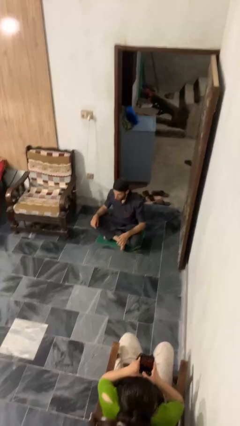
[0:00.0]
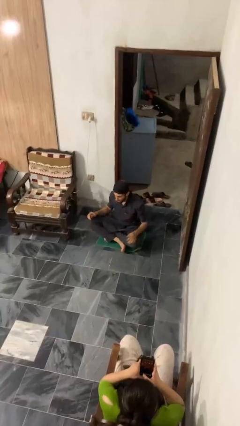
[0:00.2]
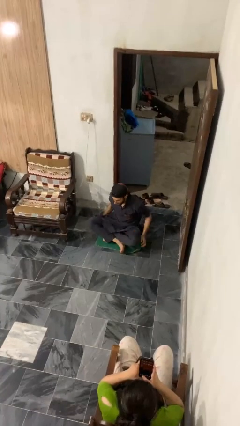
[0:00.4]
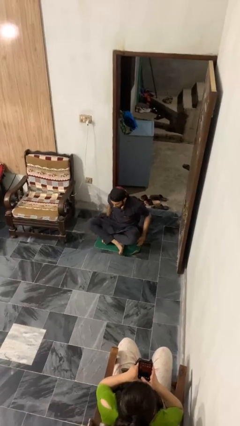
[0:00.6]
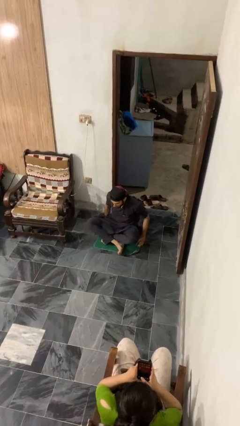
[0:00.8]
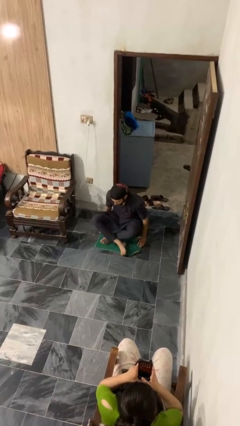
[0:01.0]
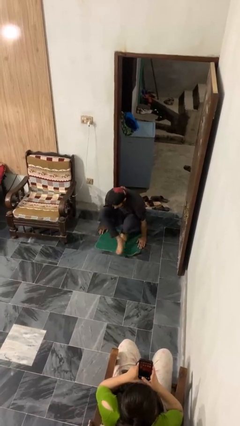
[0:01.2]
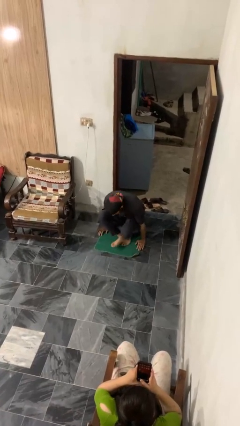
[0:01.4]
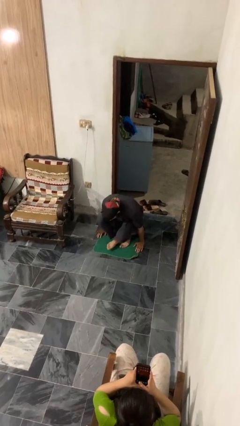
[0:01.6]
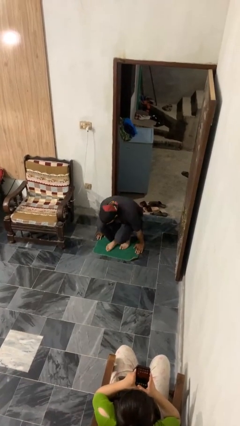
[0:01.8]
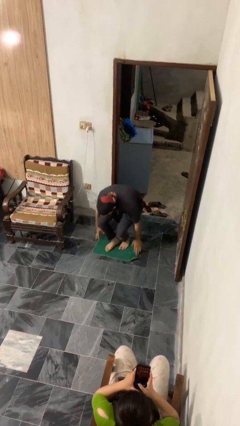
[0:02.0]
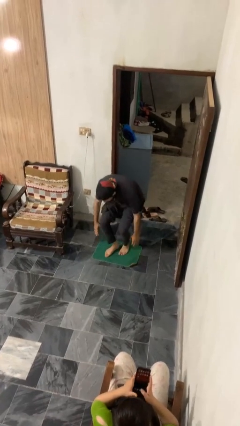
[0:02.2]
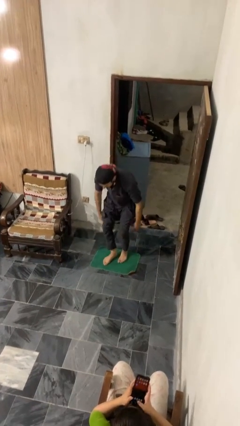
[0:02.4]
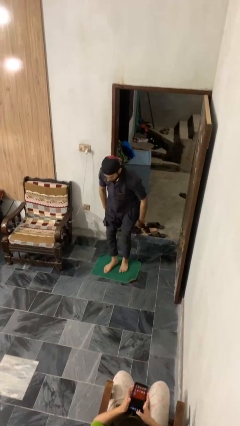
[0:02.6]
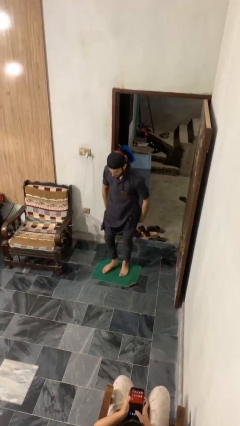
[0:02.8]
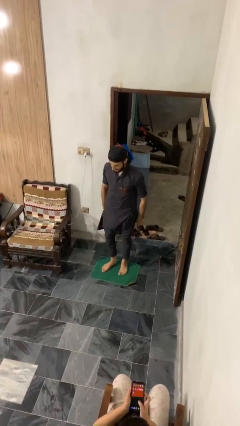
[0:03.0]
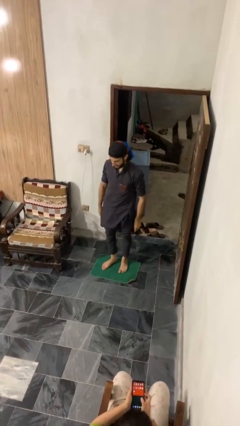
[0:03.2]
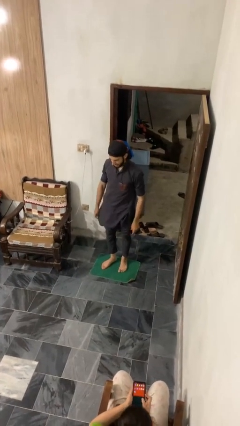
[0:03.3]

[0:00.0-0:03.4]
person stands up from floor

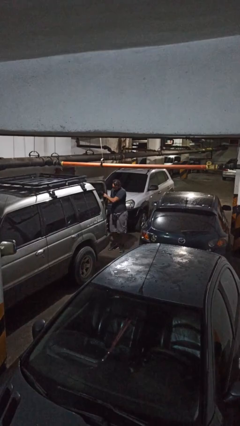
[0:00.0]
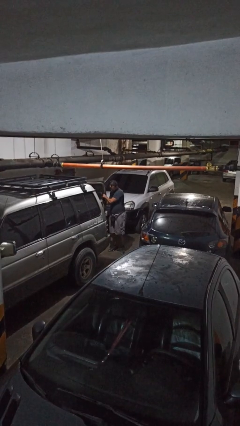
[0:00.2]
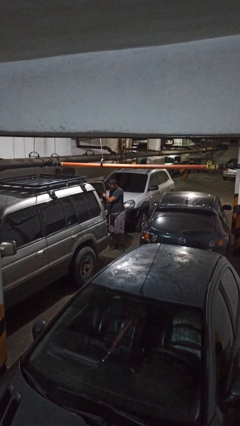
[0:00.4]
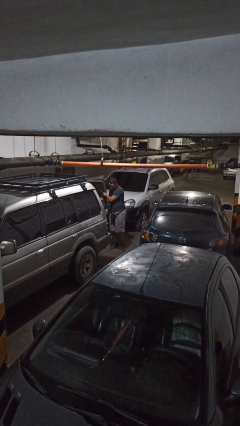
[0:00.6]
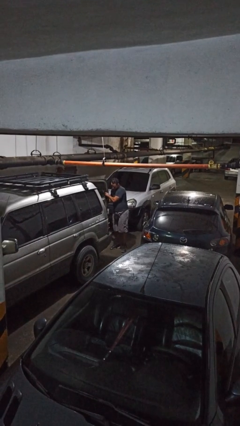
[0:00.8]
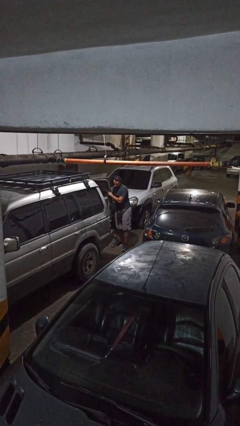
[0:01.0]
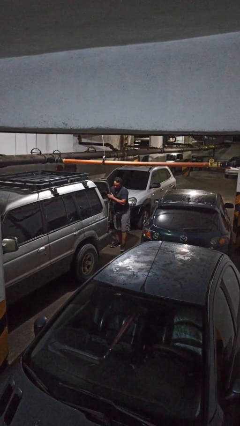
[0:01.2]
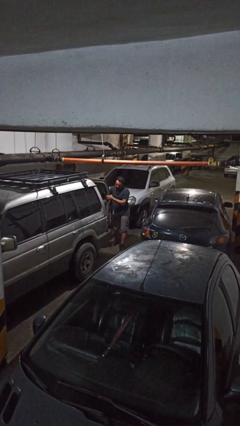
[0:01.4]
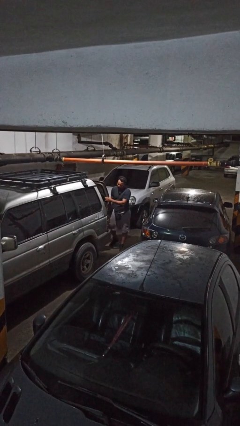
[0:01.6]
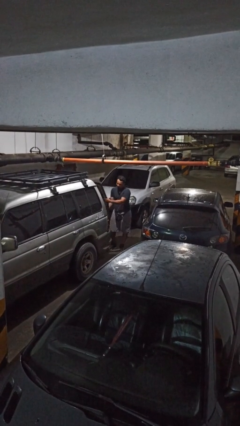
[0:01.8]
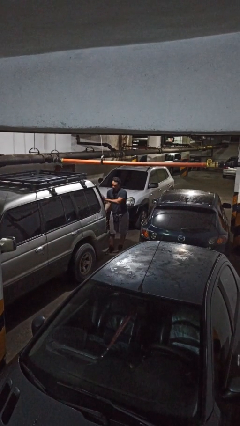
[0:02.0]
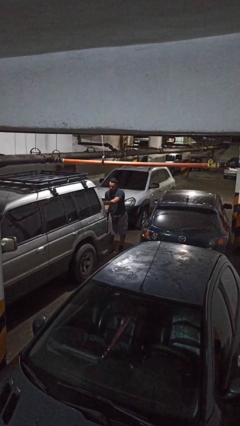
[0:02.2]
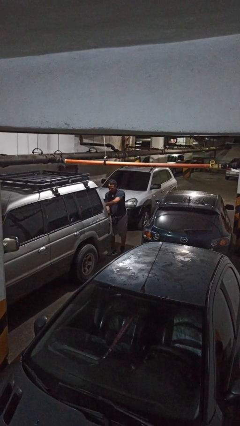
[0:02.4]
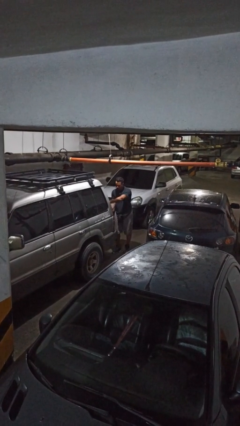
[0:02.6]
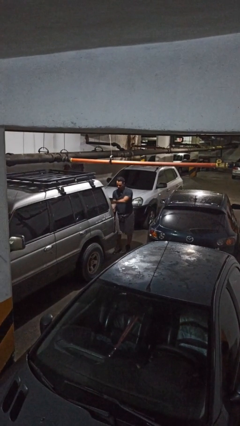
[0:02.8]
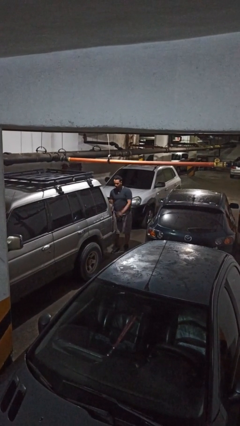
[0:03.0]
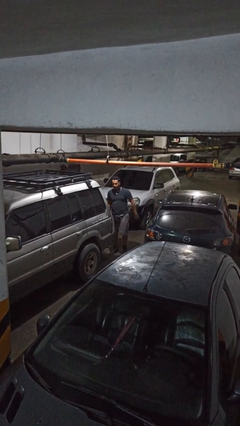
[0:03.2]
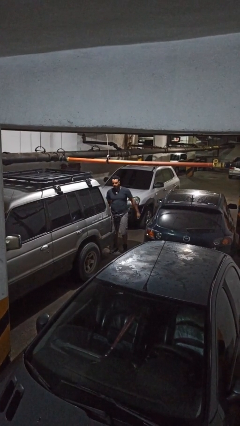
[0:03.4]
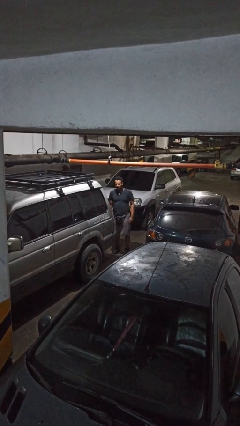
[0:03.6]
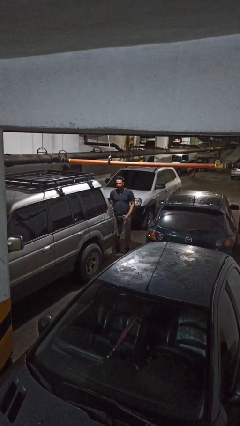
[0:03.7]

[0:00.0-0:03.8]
person closes car trunk

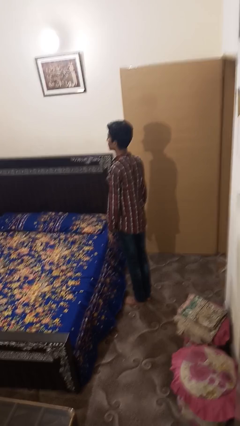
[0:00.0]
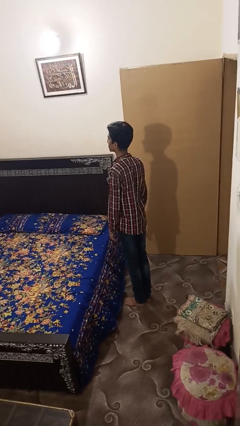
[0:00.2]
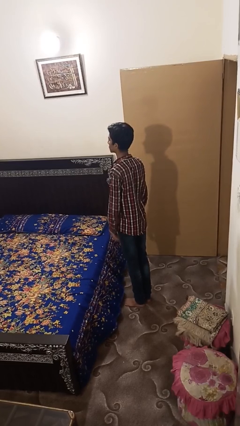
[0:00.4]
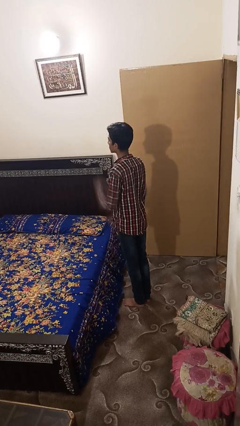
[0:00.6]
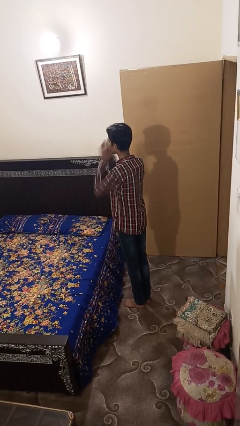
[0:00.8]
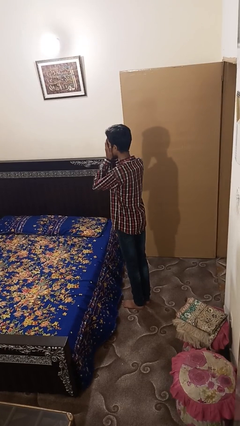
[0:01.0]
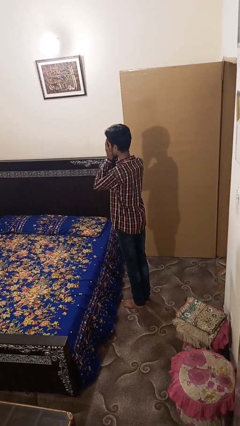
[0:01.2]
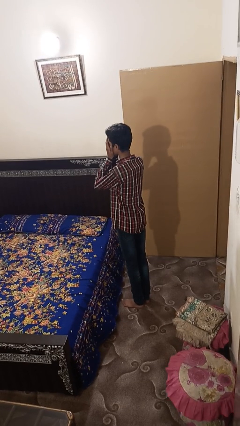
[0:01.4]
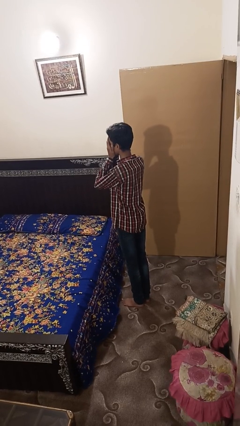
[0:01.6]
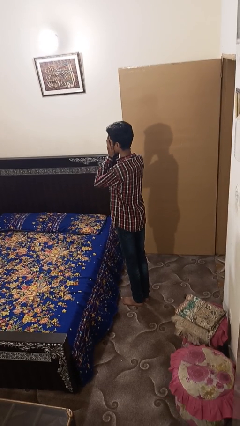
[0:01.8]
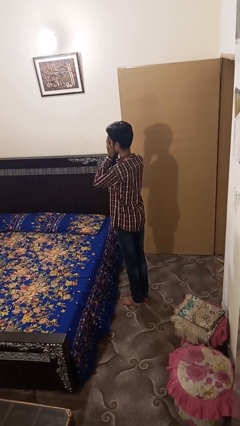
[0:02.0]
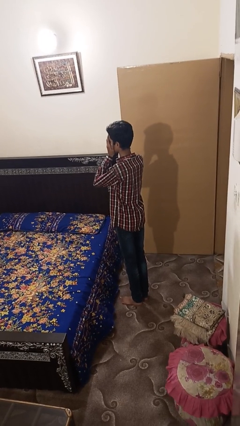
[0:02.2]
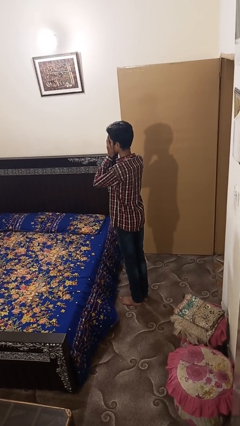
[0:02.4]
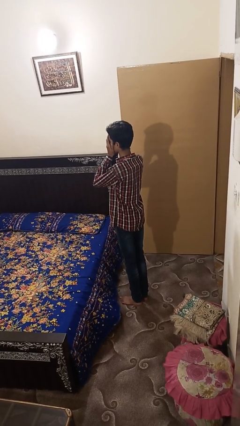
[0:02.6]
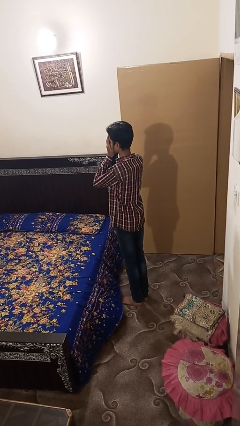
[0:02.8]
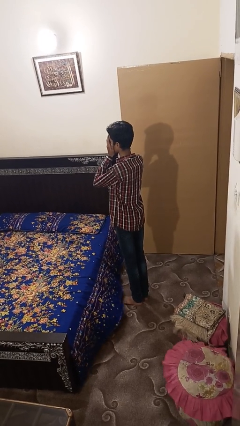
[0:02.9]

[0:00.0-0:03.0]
person covers face with hands

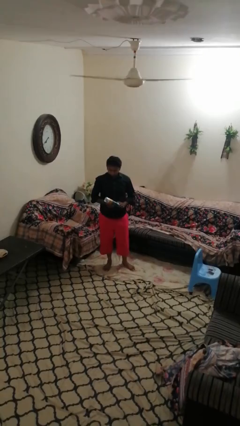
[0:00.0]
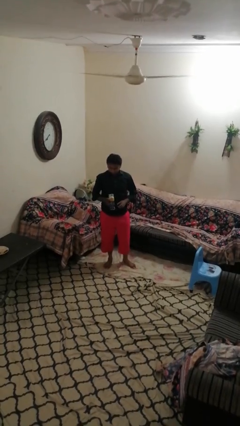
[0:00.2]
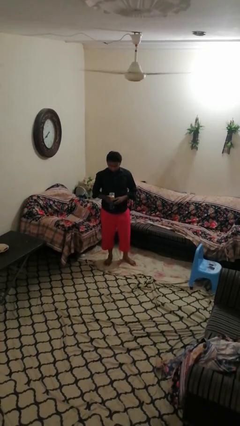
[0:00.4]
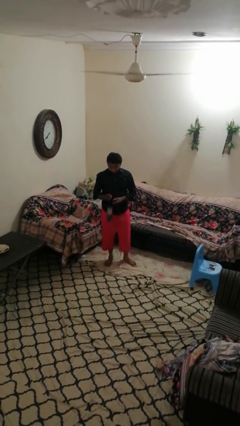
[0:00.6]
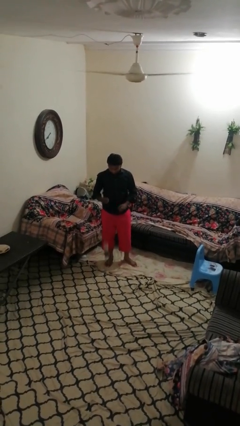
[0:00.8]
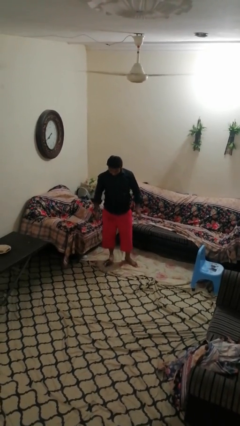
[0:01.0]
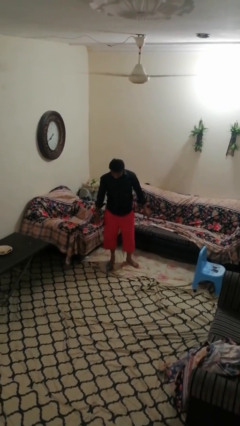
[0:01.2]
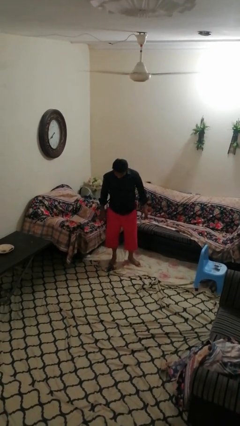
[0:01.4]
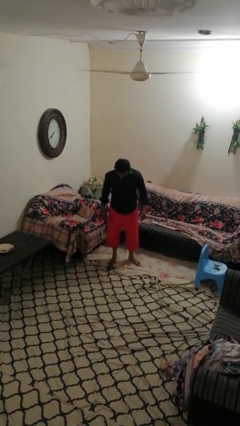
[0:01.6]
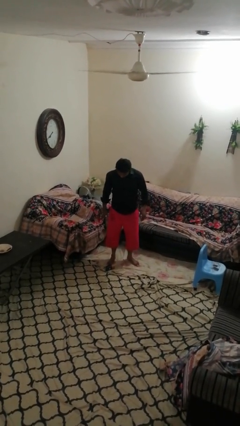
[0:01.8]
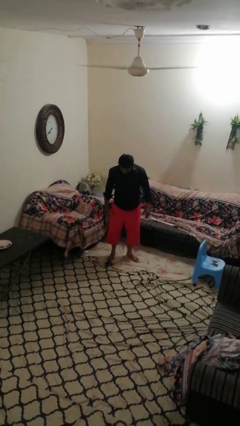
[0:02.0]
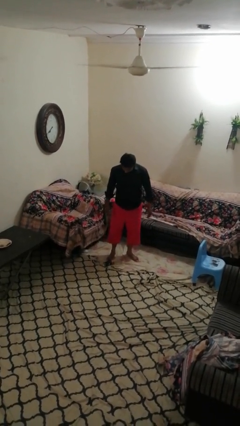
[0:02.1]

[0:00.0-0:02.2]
person drops object

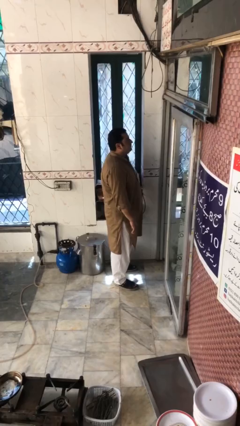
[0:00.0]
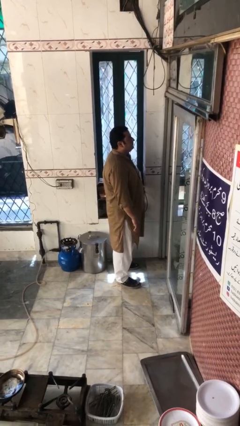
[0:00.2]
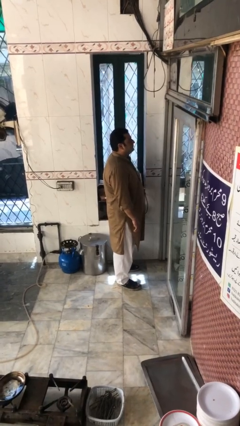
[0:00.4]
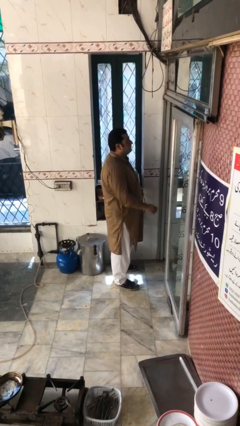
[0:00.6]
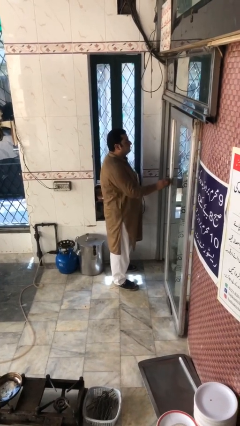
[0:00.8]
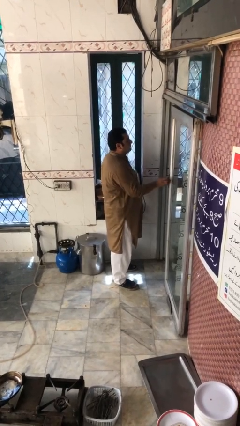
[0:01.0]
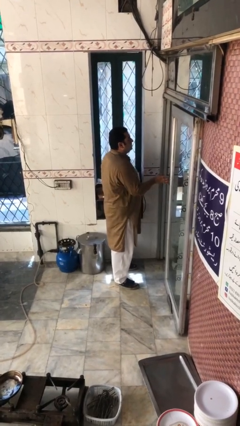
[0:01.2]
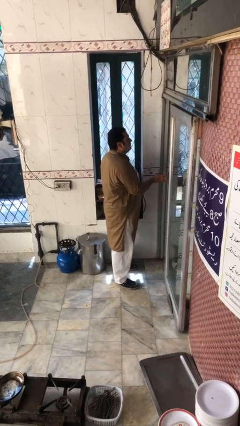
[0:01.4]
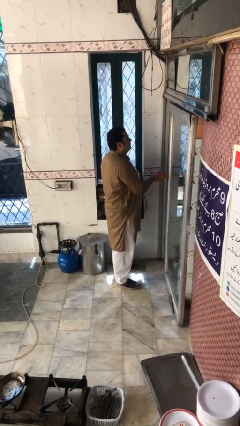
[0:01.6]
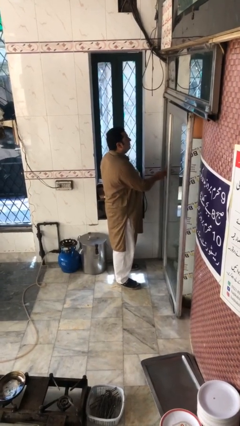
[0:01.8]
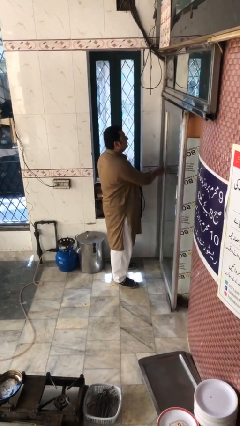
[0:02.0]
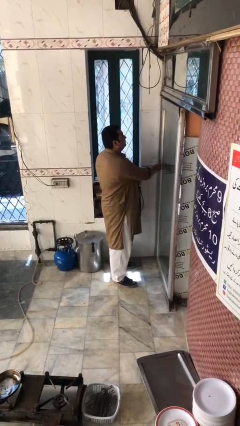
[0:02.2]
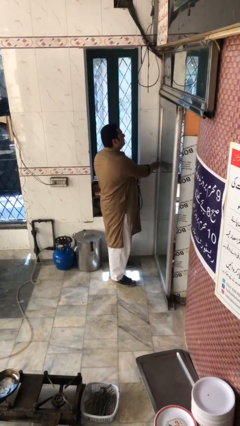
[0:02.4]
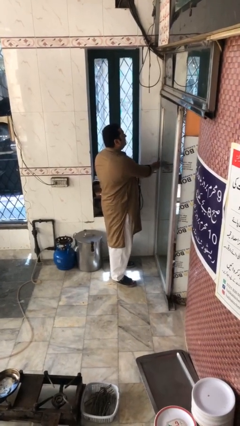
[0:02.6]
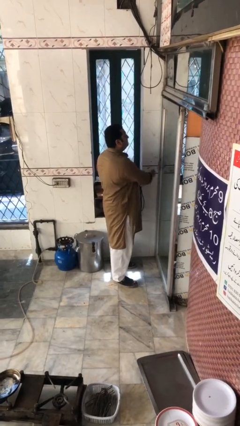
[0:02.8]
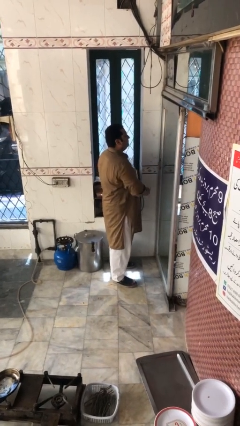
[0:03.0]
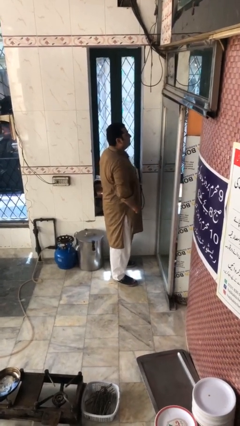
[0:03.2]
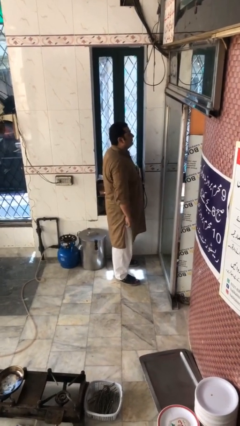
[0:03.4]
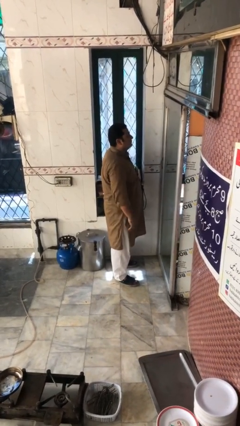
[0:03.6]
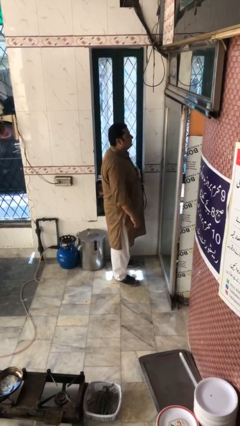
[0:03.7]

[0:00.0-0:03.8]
person closes sliding door

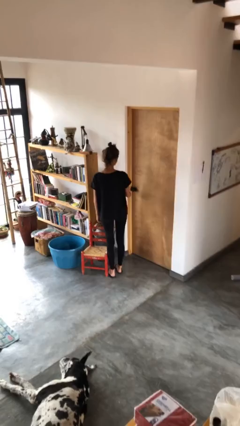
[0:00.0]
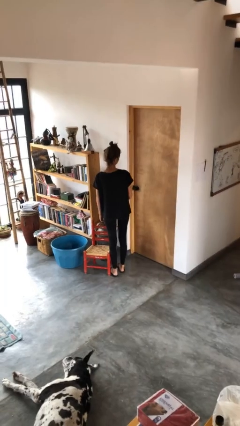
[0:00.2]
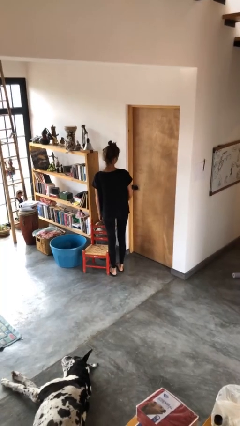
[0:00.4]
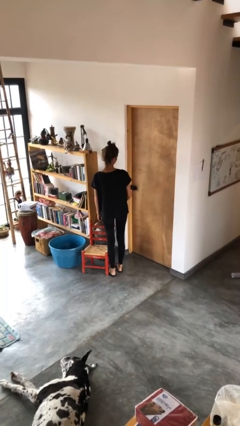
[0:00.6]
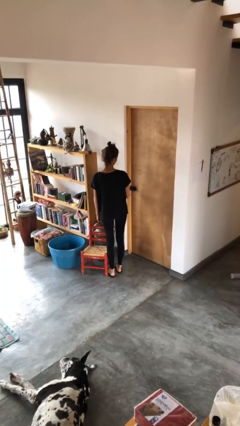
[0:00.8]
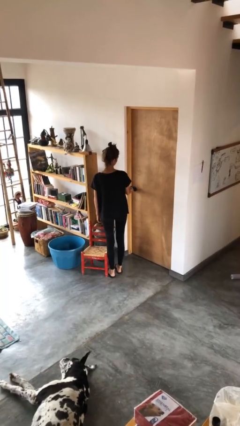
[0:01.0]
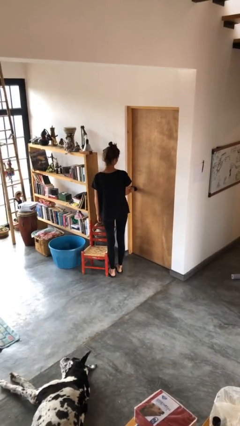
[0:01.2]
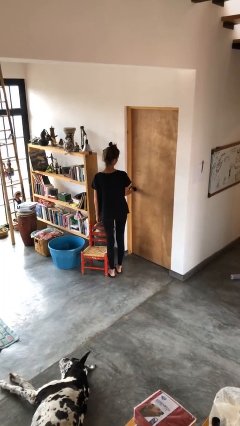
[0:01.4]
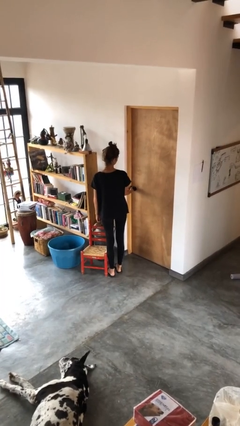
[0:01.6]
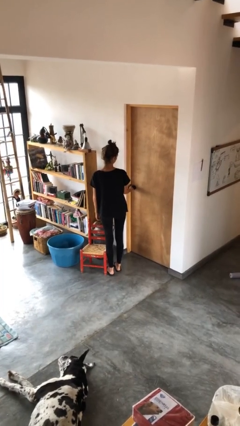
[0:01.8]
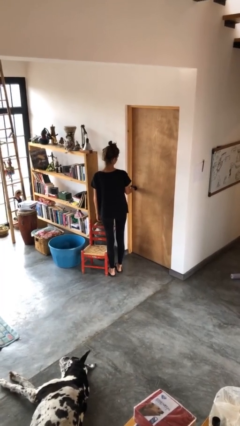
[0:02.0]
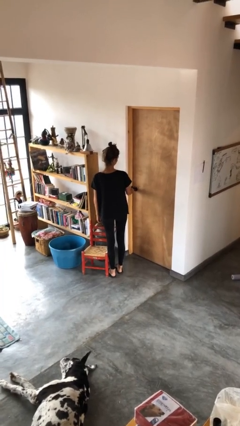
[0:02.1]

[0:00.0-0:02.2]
person unlocks door with keys
